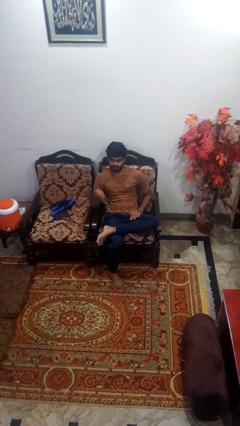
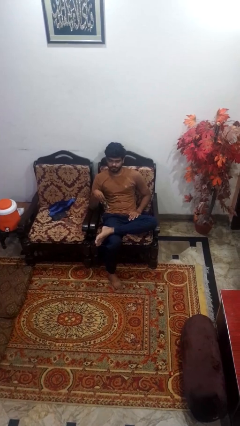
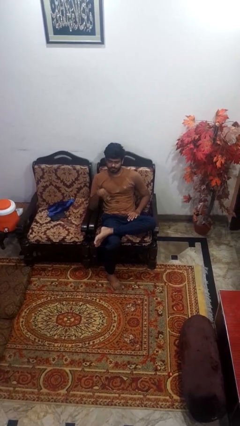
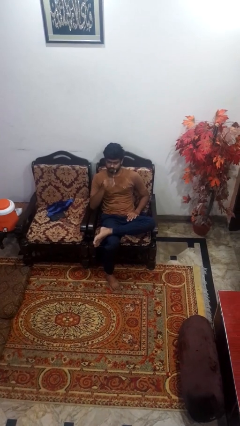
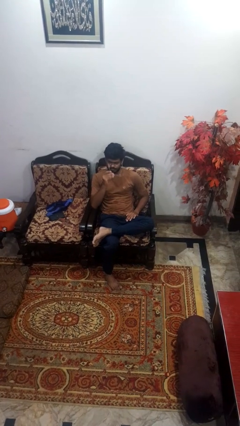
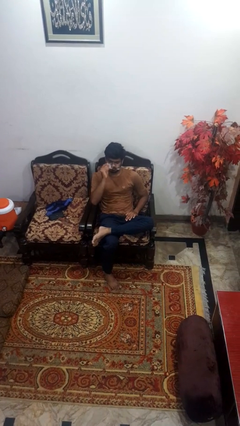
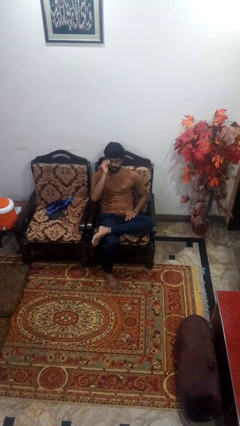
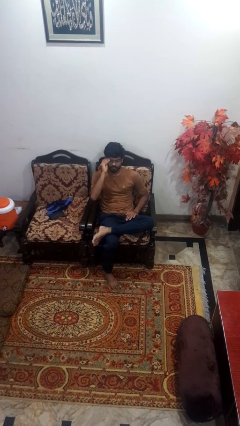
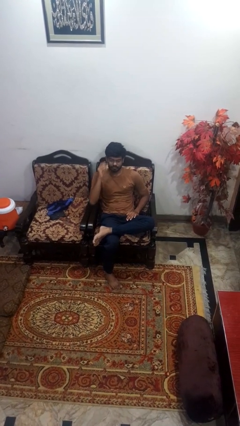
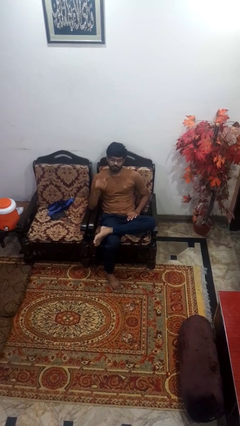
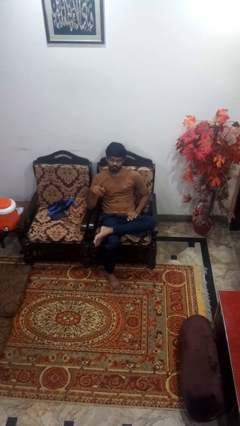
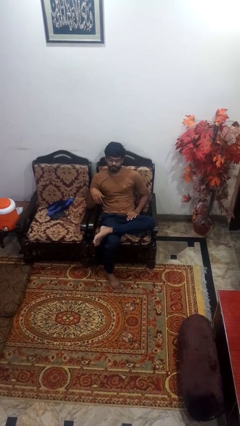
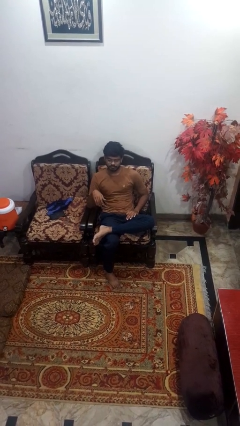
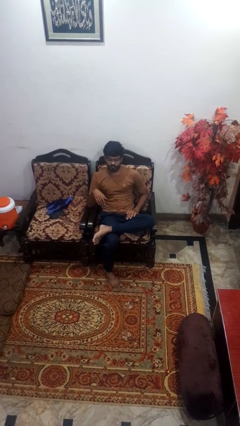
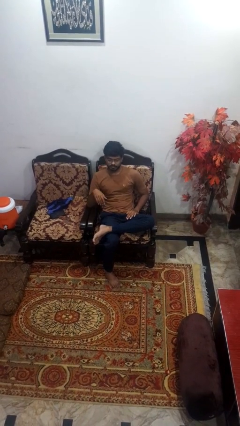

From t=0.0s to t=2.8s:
person puts on glasses

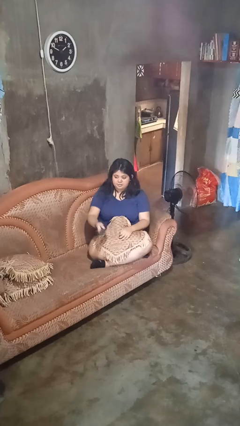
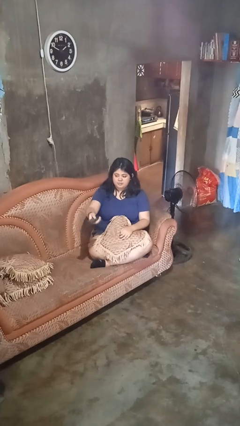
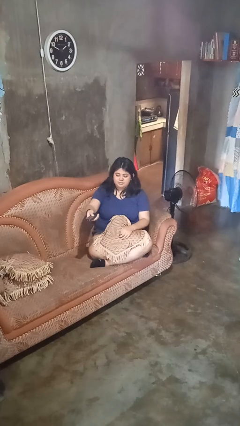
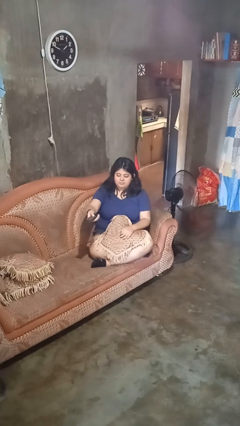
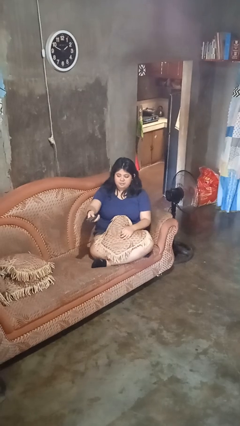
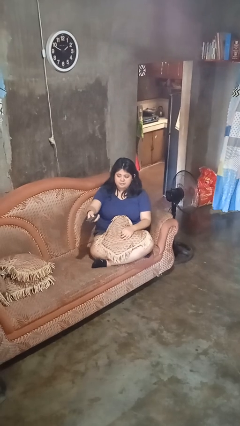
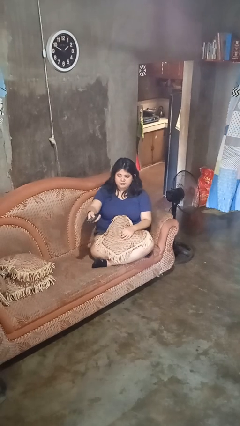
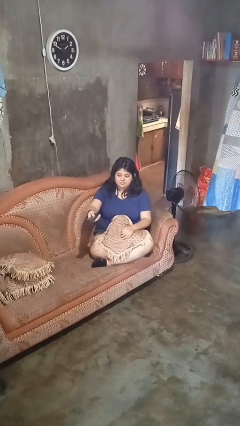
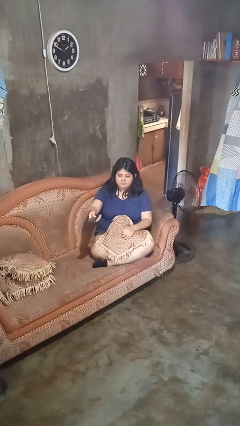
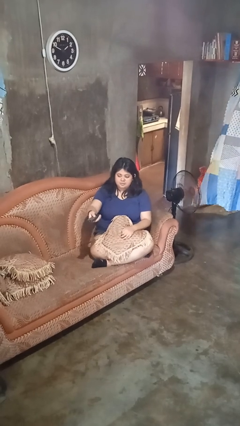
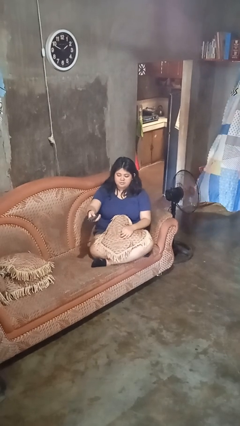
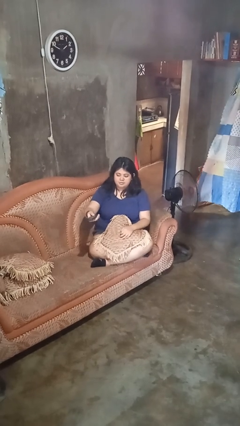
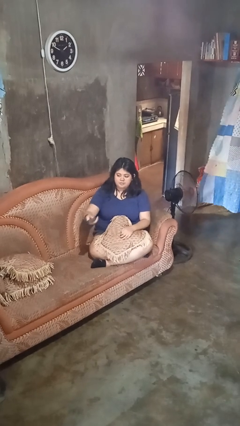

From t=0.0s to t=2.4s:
person uses television remote

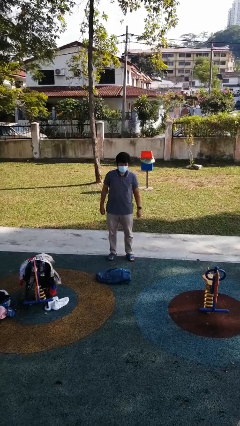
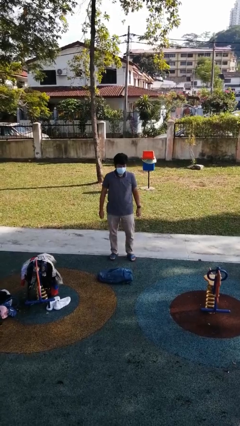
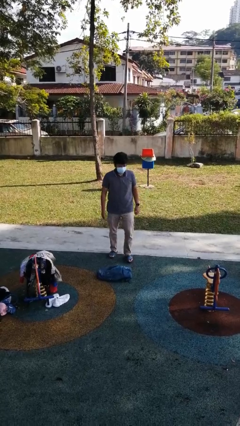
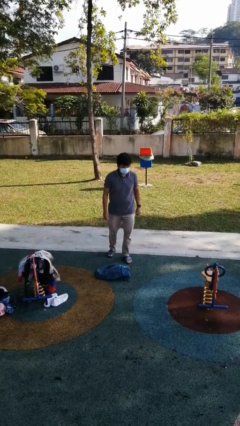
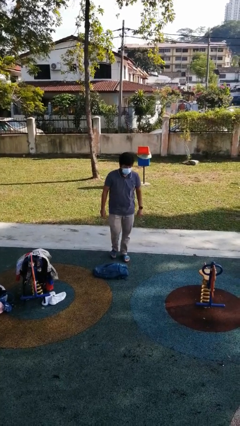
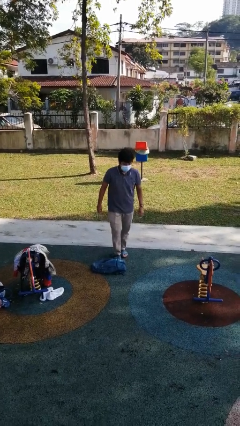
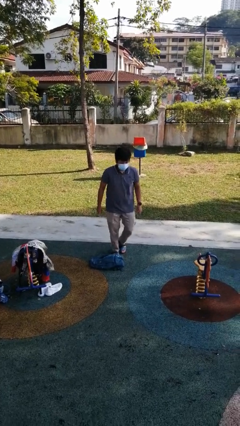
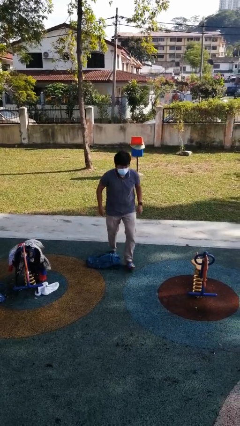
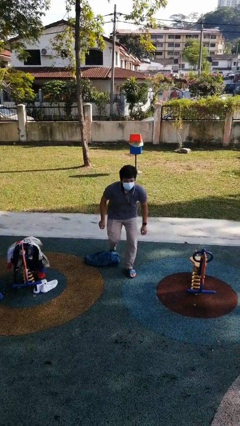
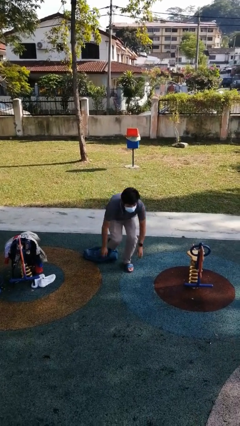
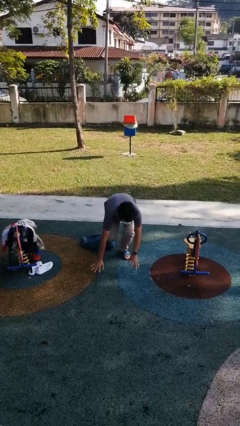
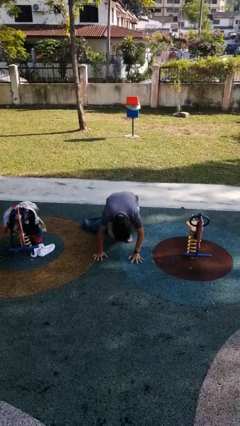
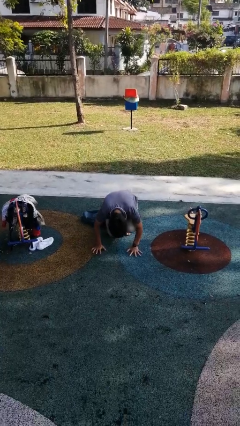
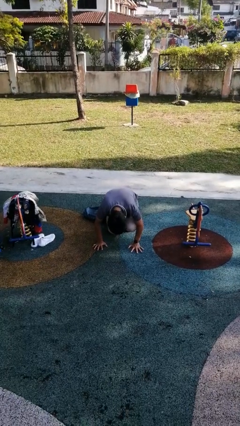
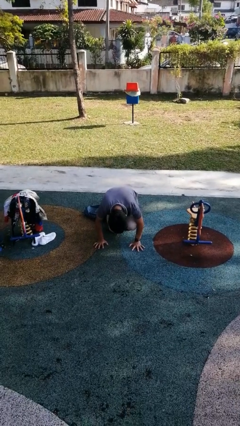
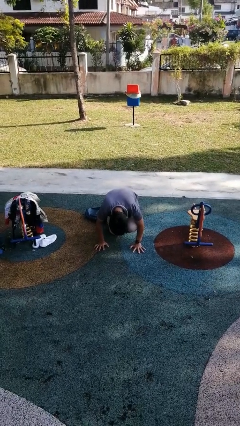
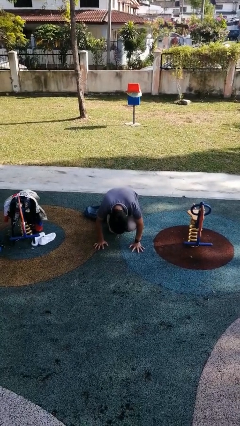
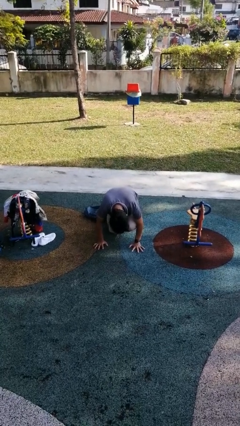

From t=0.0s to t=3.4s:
person trips on object on floor

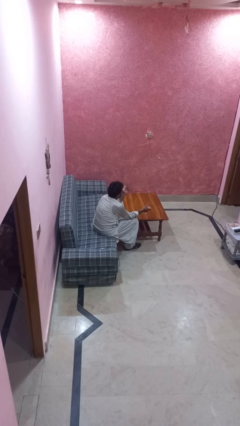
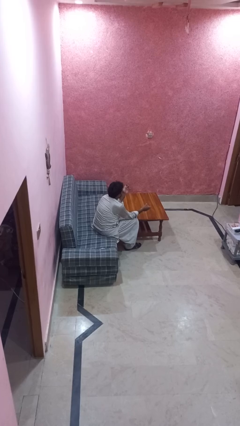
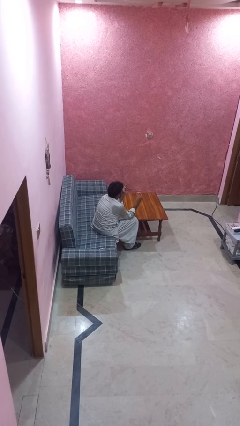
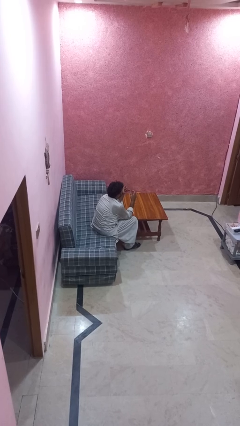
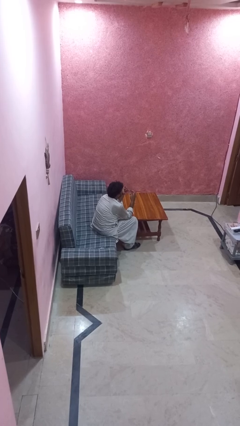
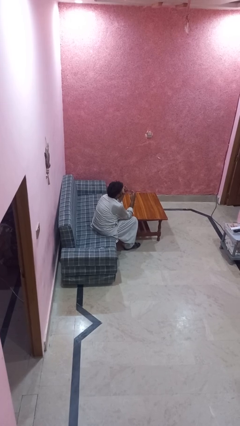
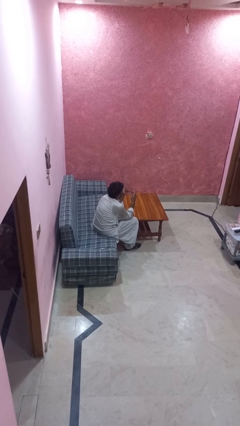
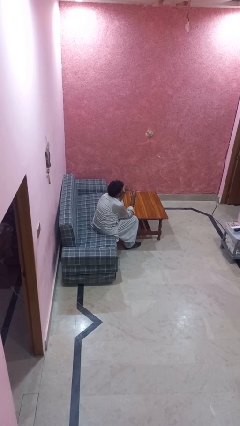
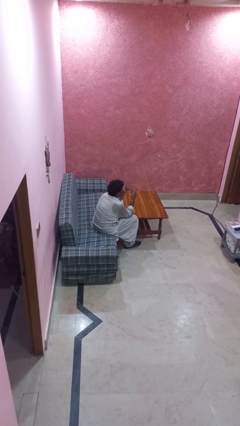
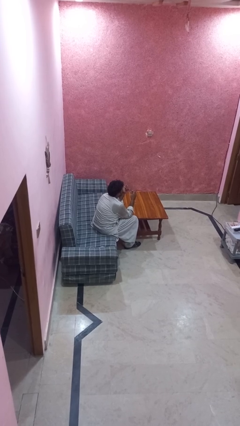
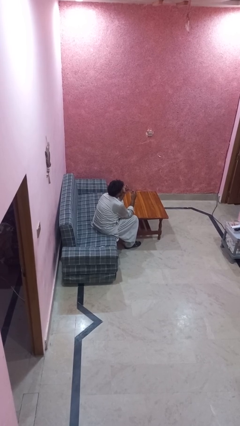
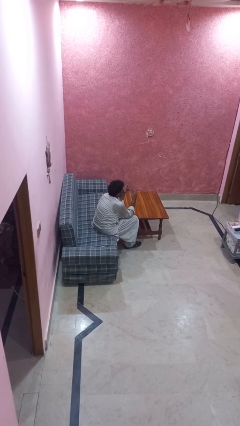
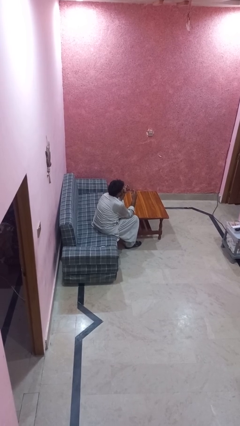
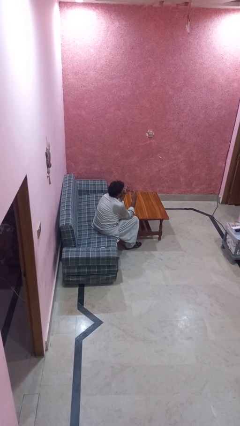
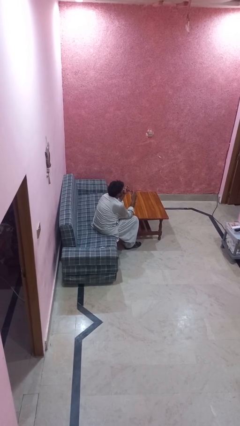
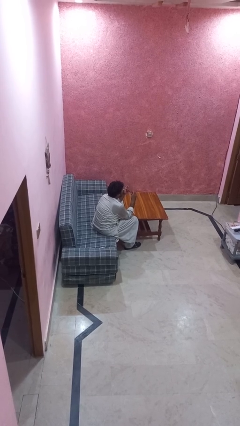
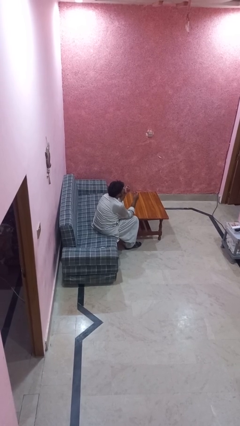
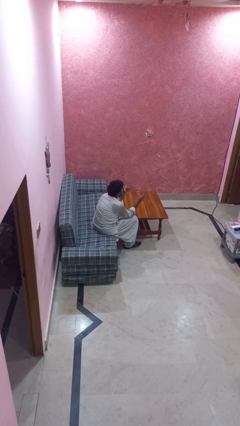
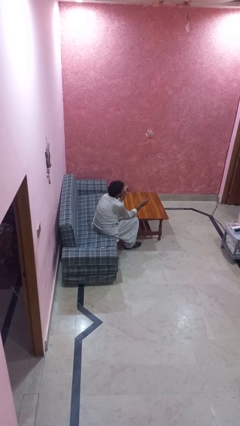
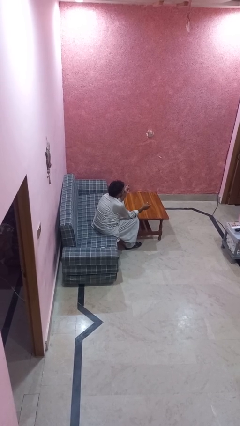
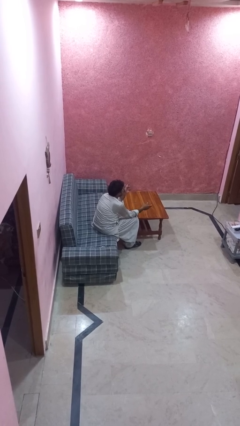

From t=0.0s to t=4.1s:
person clips fingernails

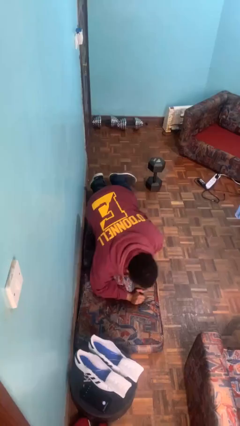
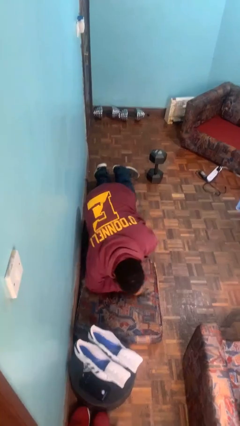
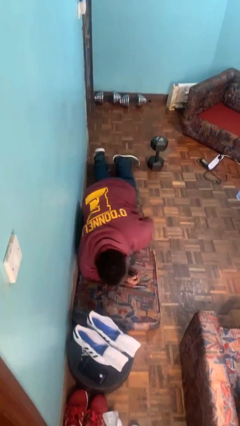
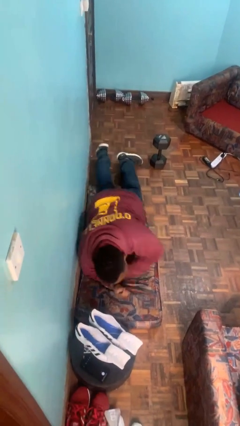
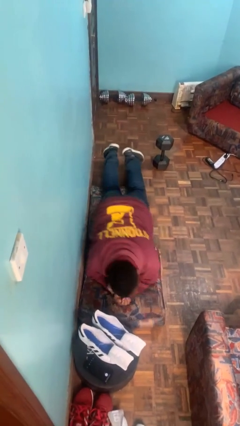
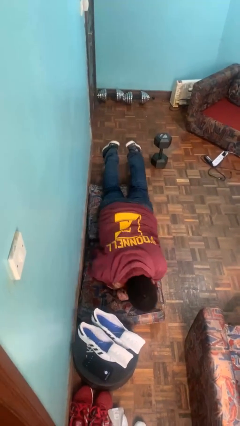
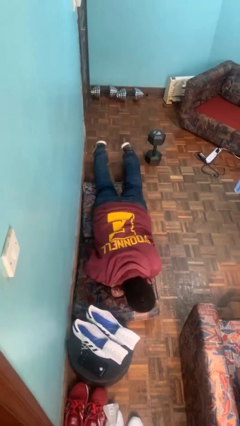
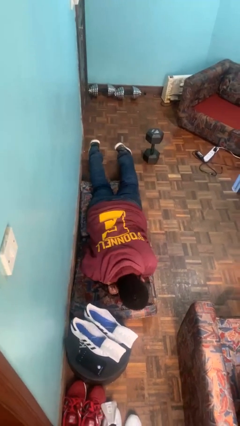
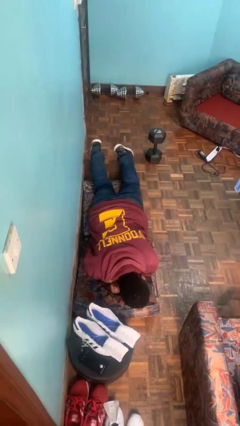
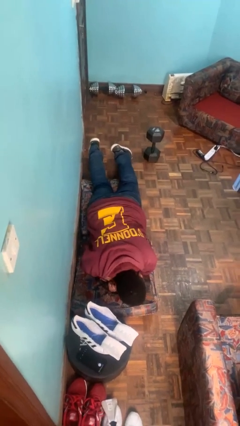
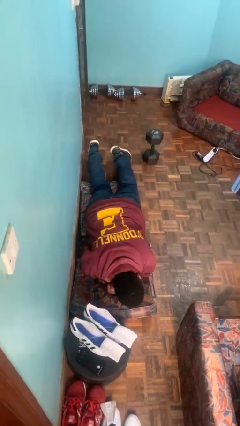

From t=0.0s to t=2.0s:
person lies down on floor

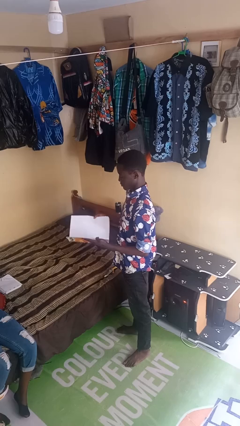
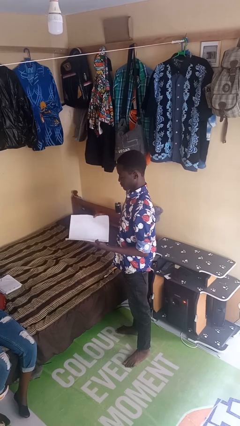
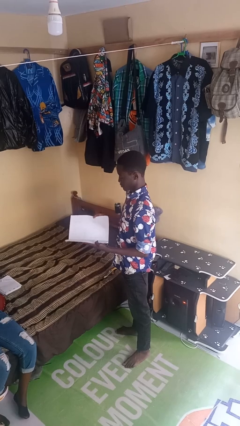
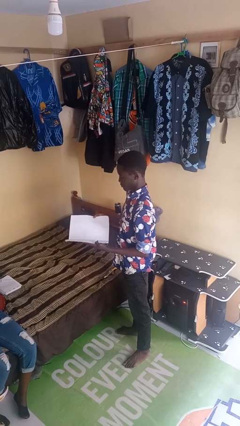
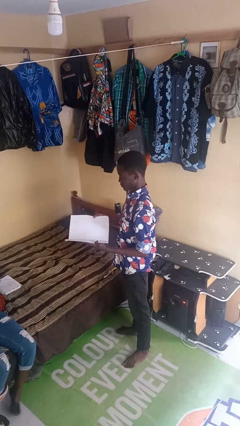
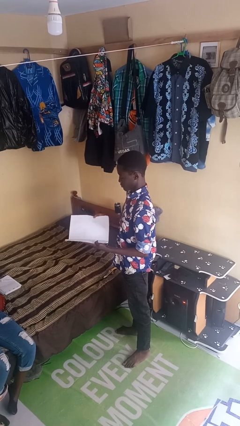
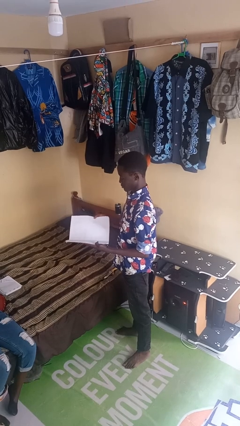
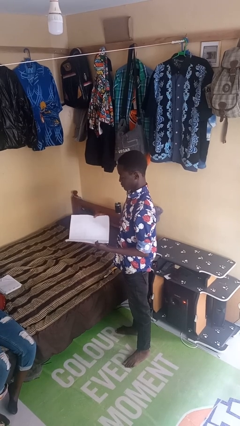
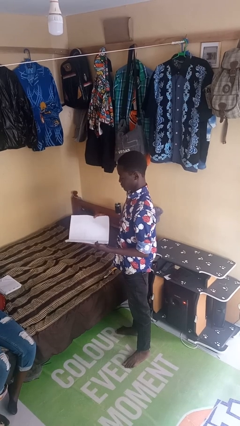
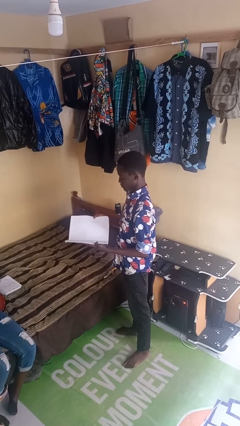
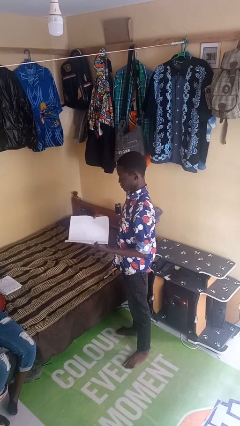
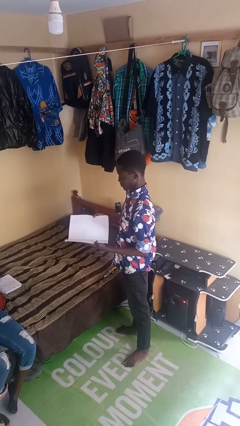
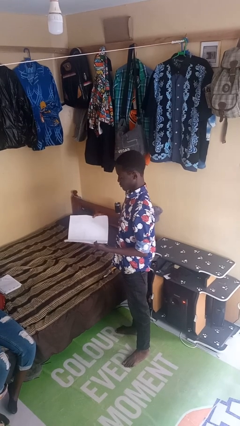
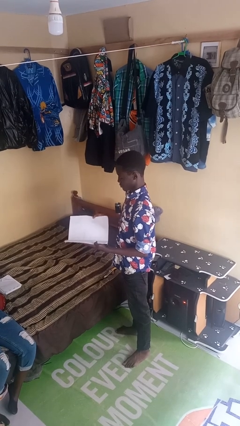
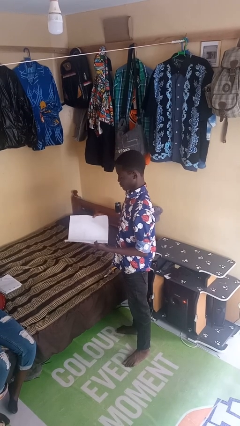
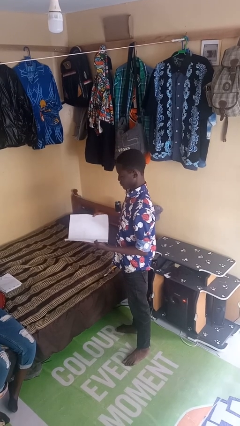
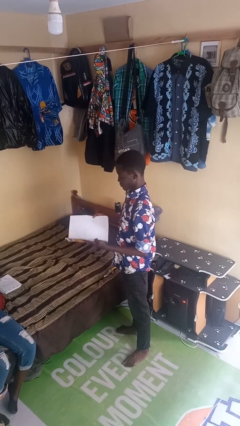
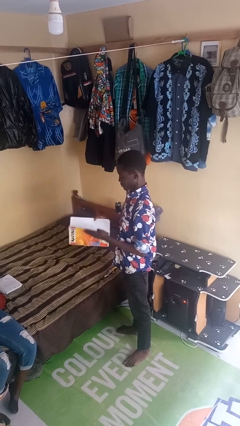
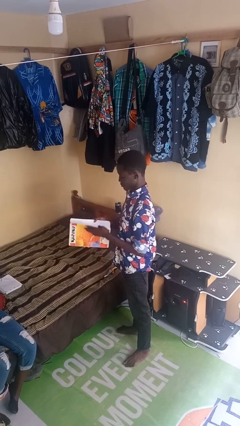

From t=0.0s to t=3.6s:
person reads newspaper
